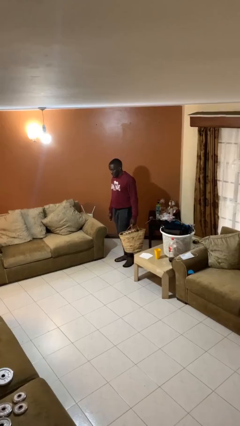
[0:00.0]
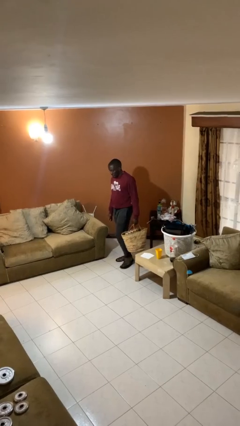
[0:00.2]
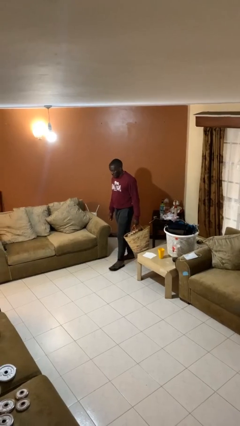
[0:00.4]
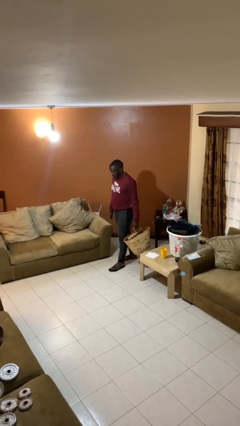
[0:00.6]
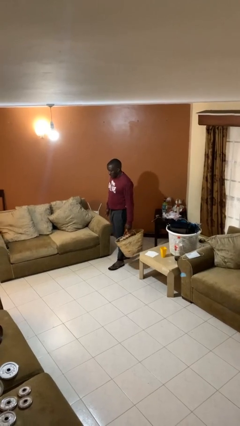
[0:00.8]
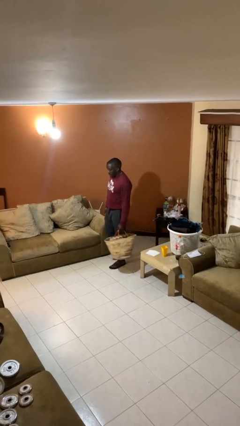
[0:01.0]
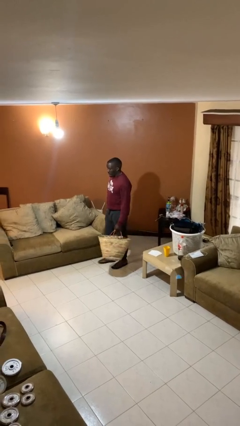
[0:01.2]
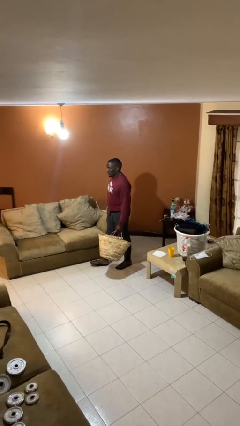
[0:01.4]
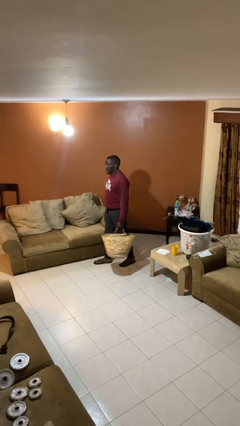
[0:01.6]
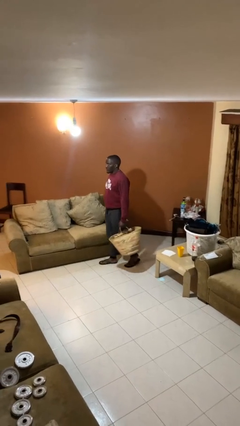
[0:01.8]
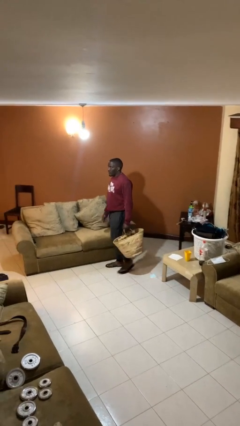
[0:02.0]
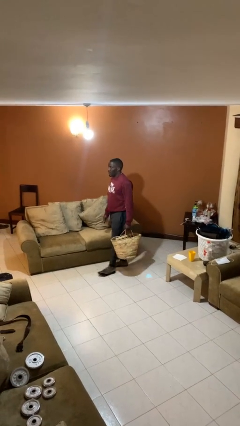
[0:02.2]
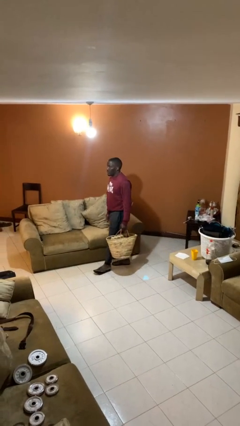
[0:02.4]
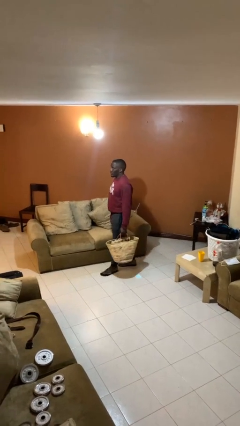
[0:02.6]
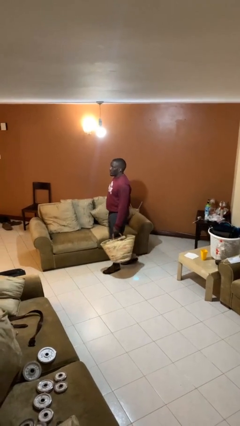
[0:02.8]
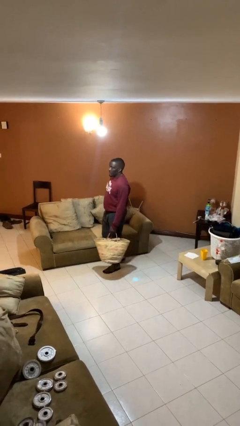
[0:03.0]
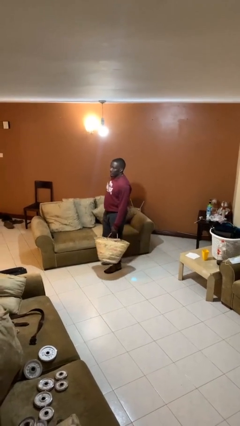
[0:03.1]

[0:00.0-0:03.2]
person carries groceries

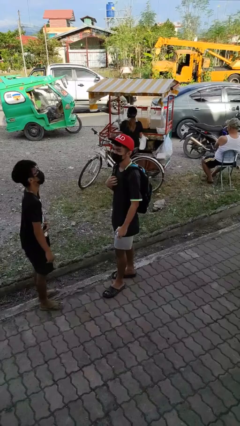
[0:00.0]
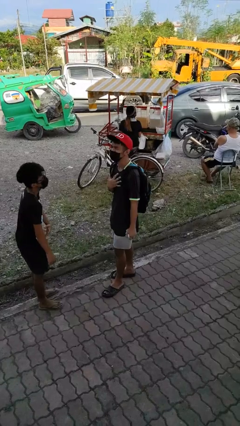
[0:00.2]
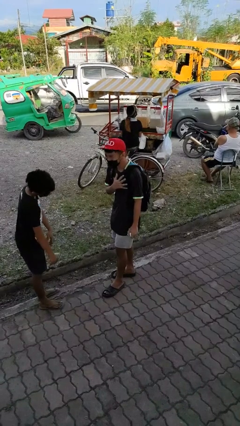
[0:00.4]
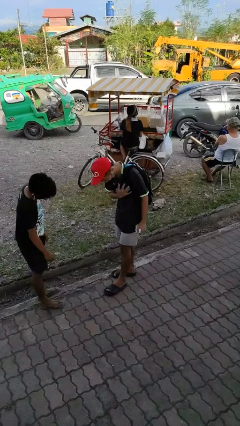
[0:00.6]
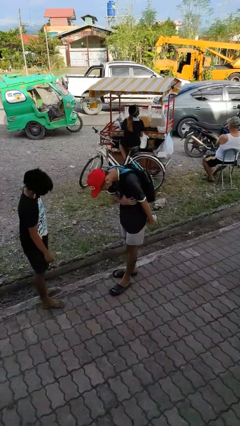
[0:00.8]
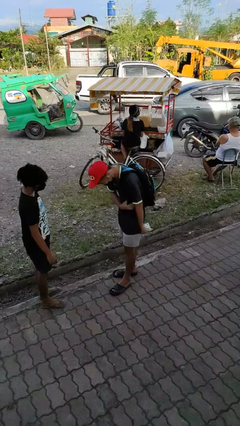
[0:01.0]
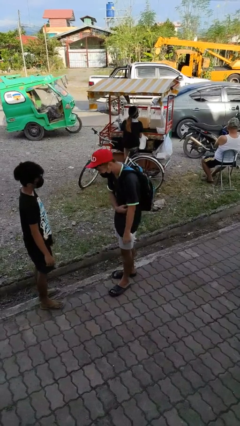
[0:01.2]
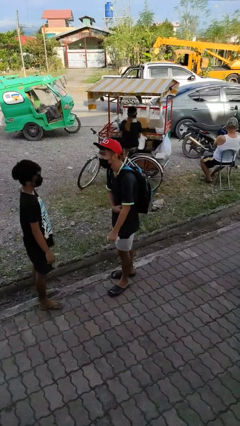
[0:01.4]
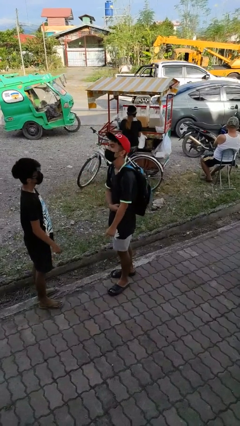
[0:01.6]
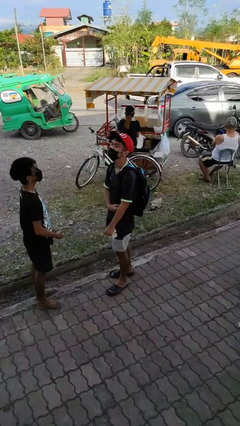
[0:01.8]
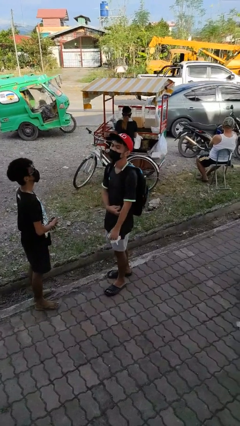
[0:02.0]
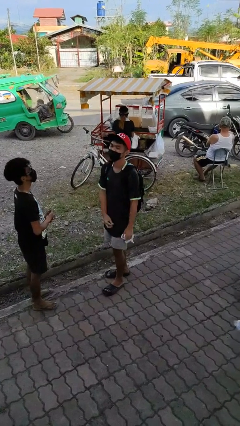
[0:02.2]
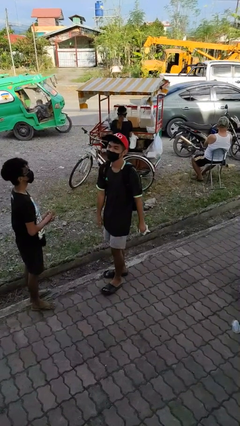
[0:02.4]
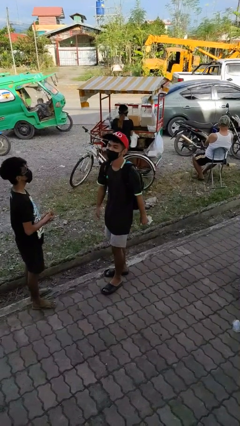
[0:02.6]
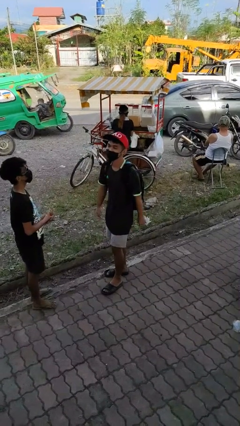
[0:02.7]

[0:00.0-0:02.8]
person laughs with person

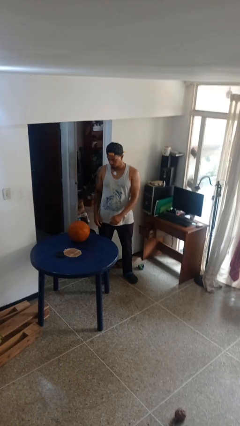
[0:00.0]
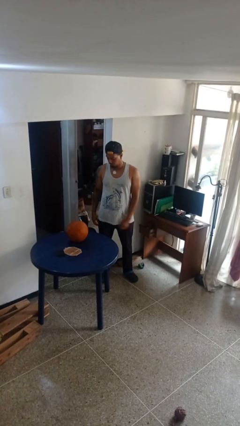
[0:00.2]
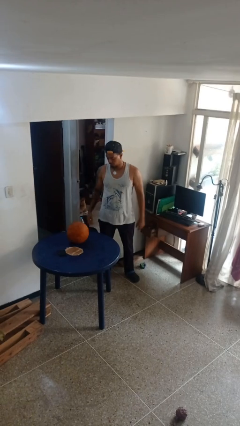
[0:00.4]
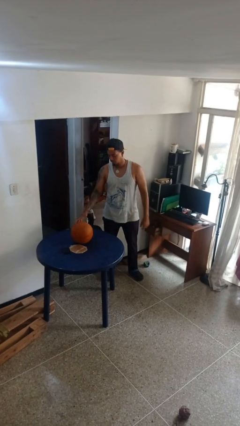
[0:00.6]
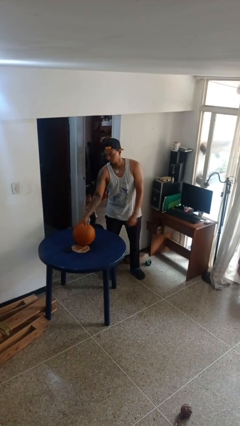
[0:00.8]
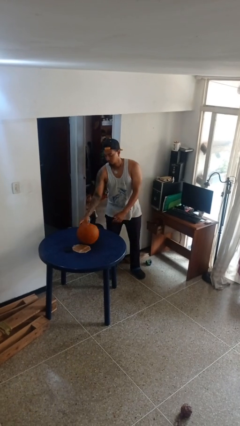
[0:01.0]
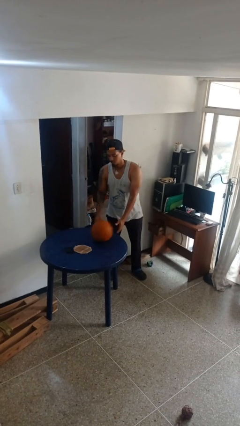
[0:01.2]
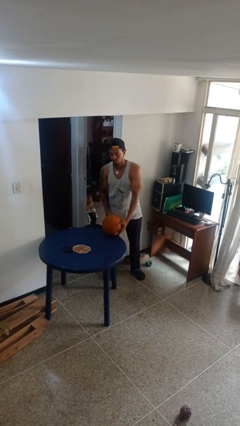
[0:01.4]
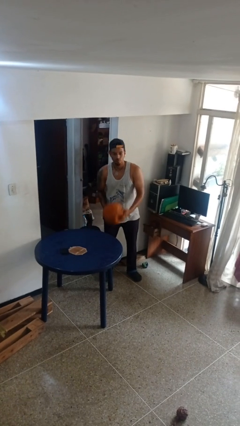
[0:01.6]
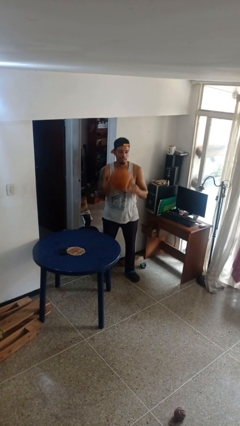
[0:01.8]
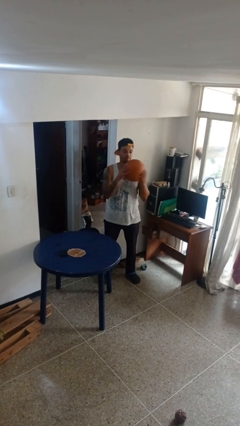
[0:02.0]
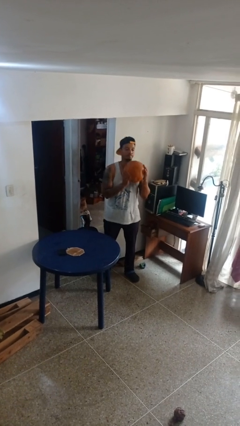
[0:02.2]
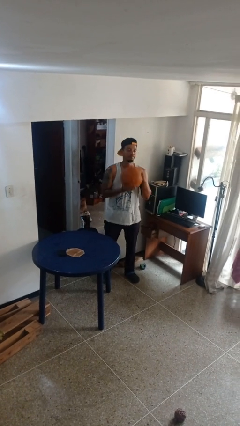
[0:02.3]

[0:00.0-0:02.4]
person picks up object from table

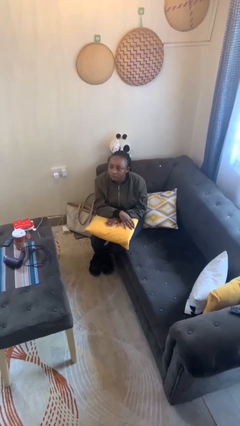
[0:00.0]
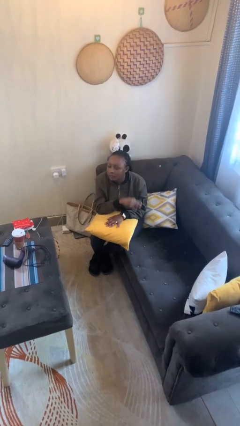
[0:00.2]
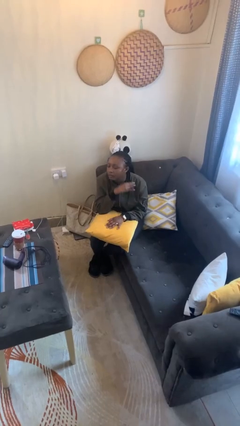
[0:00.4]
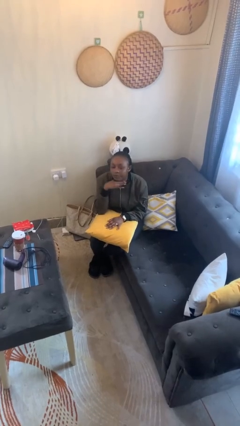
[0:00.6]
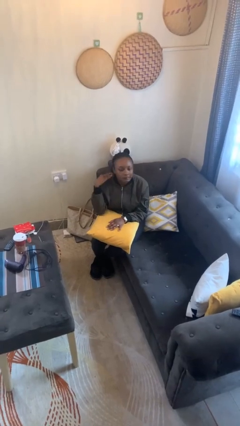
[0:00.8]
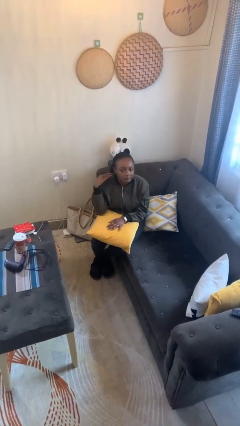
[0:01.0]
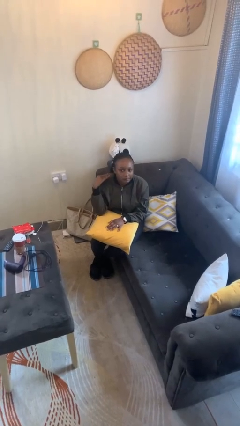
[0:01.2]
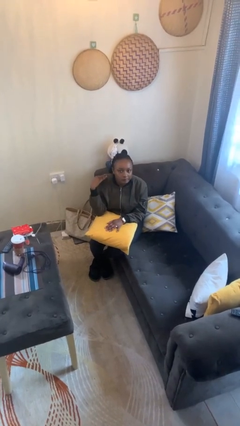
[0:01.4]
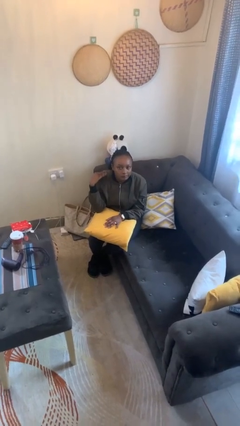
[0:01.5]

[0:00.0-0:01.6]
person gestures cut

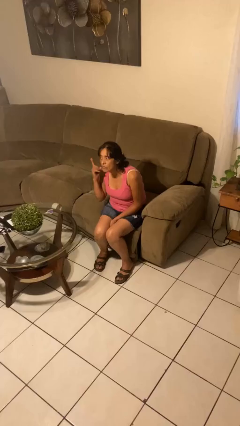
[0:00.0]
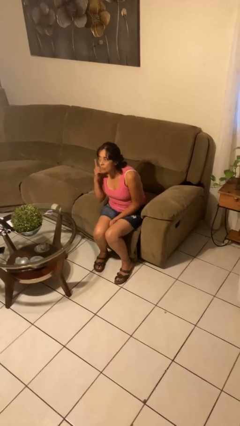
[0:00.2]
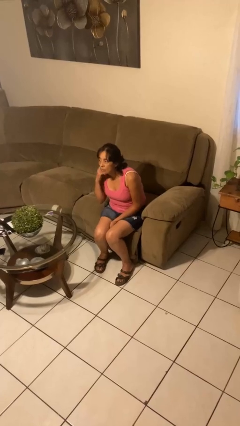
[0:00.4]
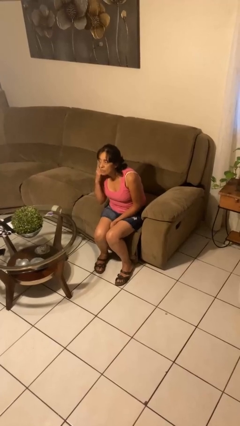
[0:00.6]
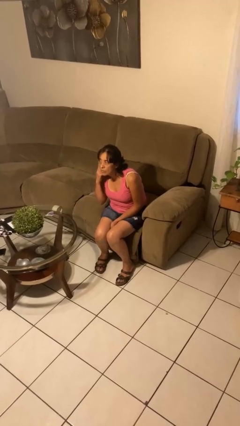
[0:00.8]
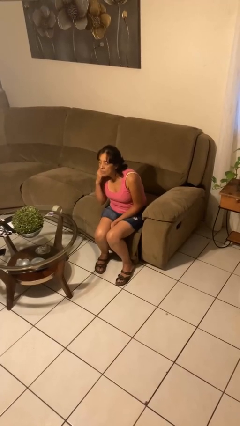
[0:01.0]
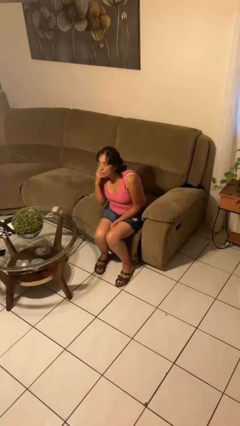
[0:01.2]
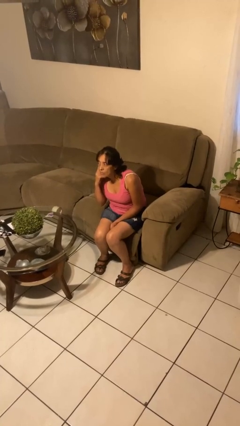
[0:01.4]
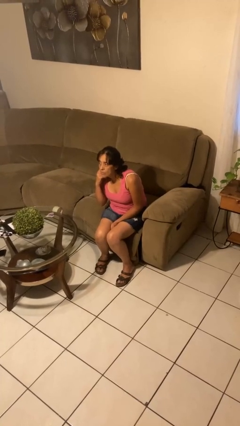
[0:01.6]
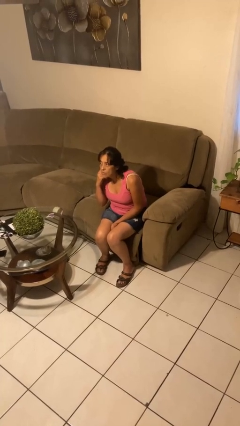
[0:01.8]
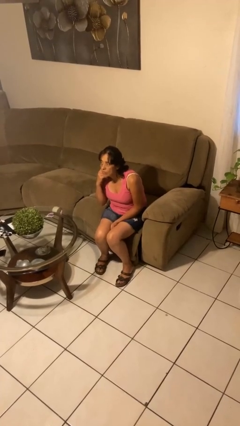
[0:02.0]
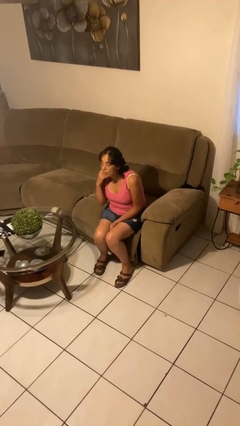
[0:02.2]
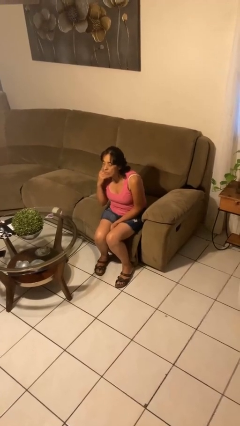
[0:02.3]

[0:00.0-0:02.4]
person gestures listen closely

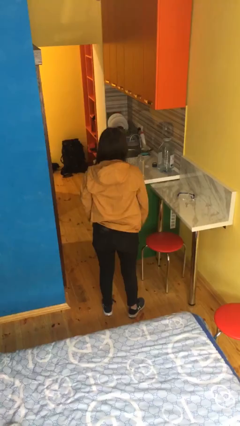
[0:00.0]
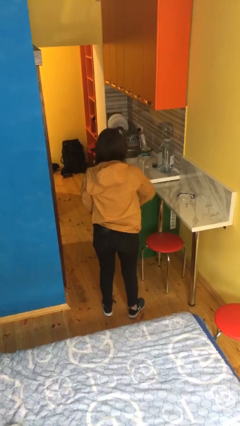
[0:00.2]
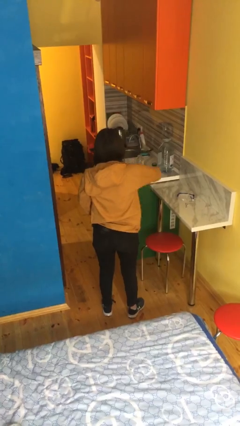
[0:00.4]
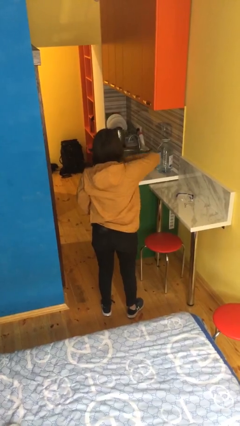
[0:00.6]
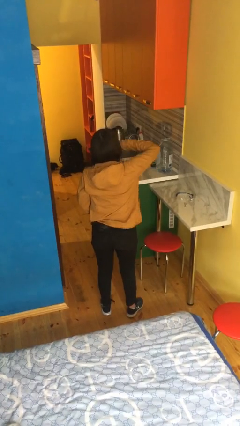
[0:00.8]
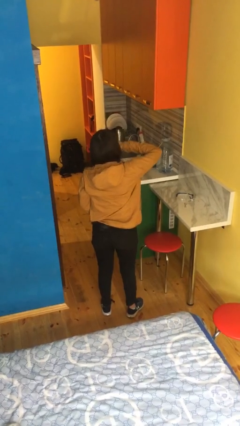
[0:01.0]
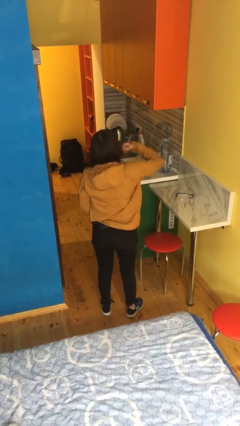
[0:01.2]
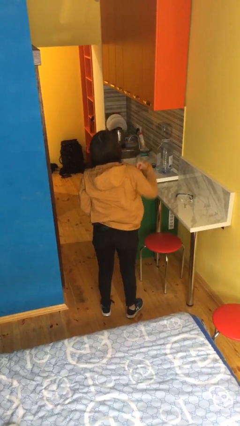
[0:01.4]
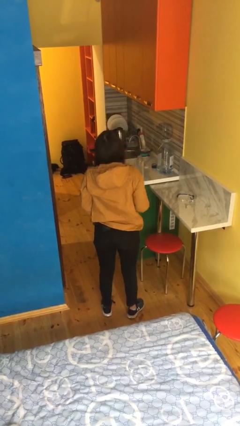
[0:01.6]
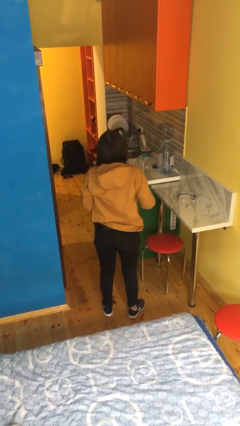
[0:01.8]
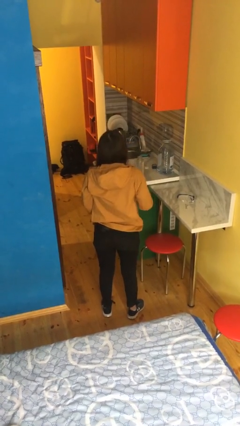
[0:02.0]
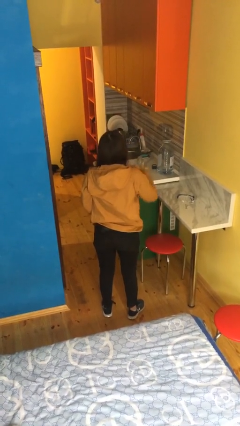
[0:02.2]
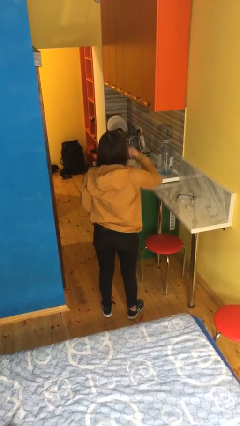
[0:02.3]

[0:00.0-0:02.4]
person zips up jacket

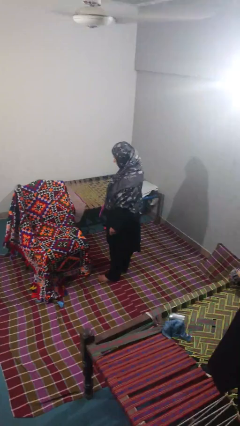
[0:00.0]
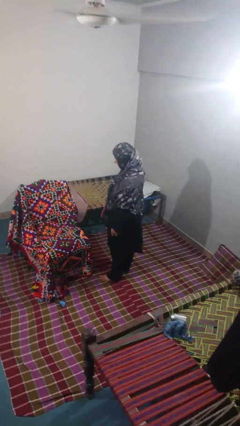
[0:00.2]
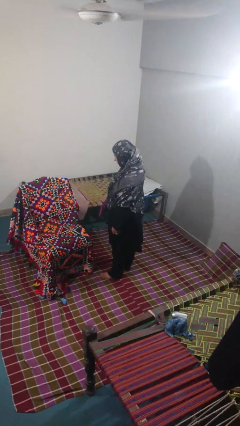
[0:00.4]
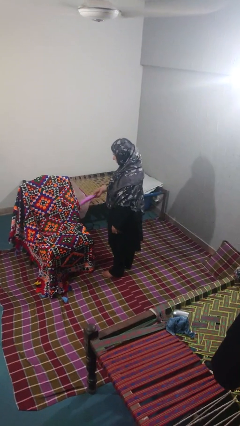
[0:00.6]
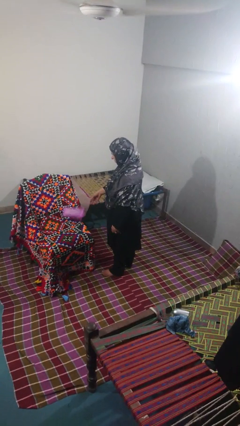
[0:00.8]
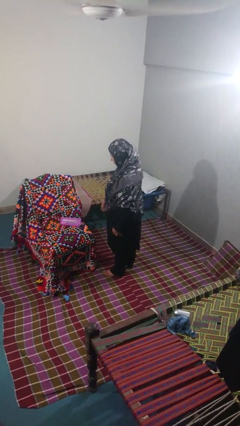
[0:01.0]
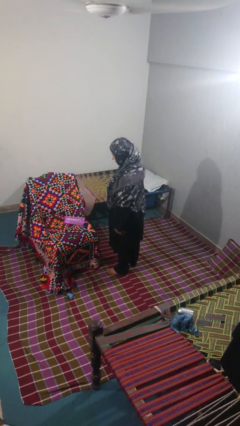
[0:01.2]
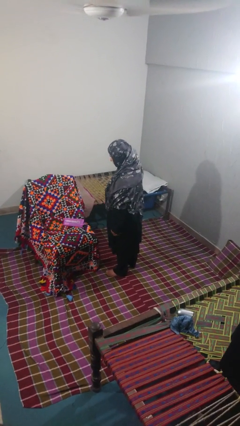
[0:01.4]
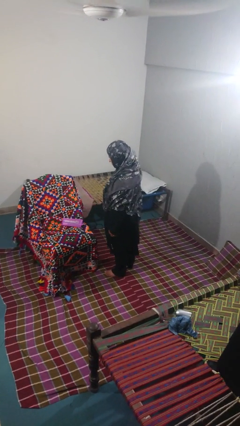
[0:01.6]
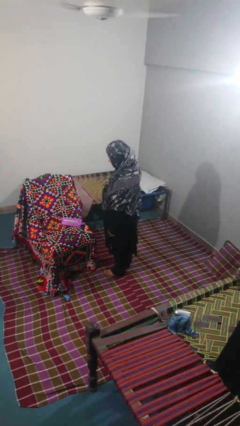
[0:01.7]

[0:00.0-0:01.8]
person puts down object on couch
